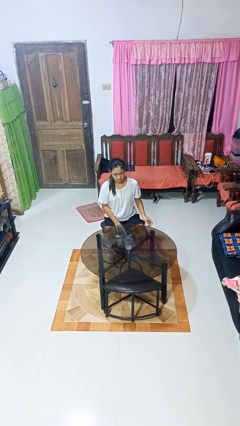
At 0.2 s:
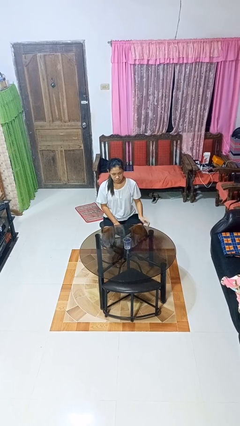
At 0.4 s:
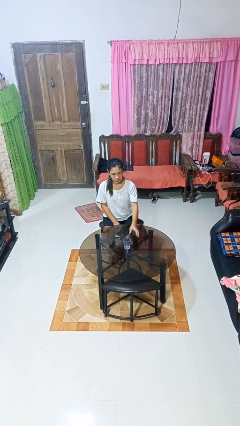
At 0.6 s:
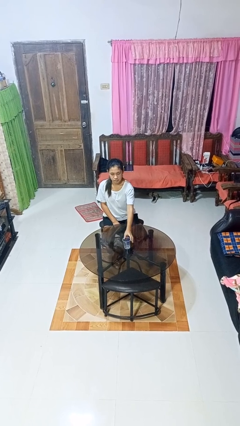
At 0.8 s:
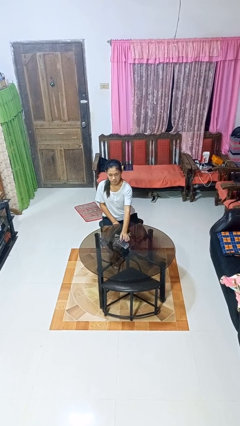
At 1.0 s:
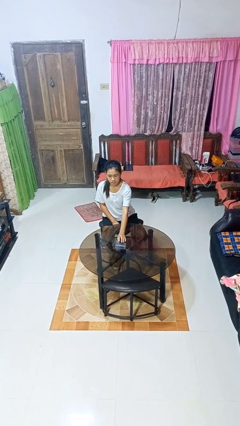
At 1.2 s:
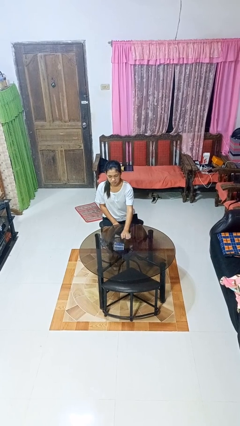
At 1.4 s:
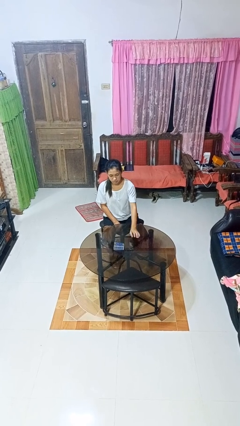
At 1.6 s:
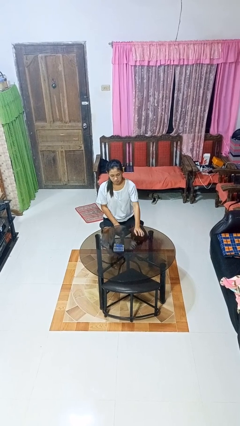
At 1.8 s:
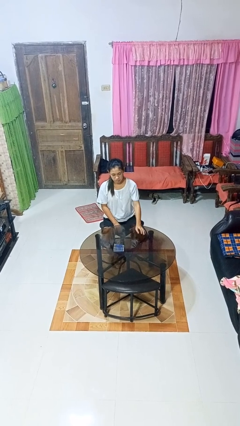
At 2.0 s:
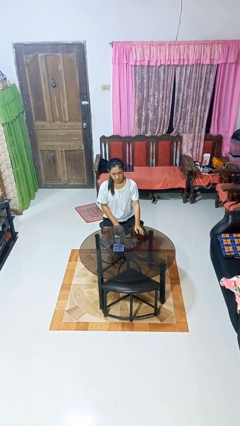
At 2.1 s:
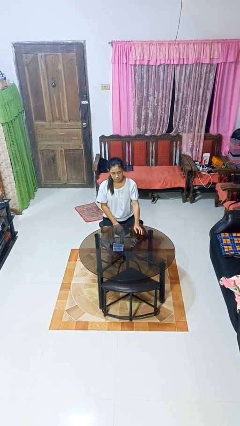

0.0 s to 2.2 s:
person knocks over glass

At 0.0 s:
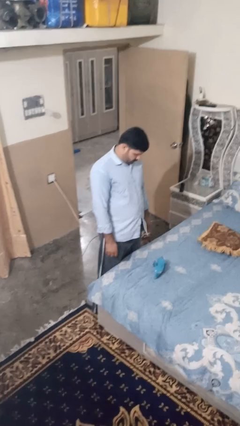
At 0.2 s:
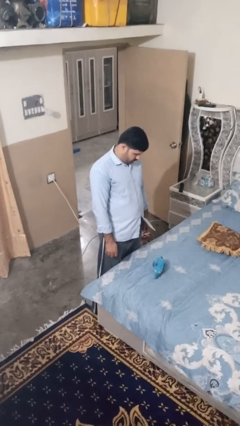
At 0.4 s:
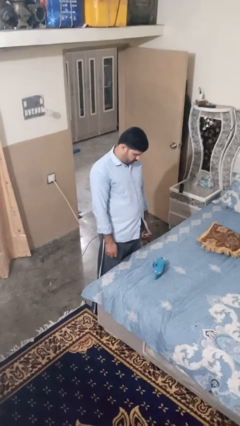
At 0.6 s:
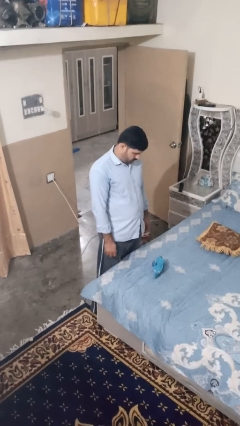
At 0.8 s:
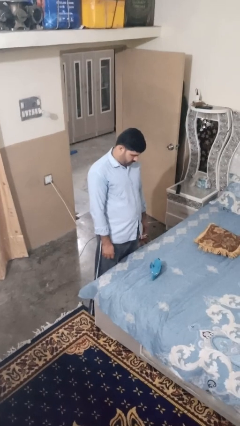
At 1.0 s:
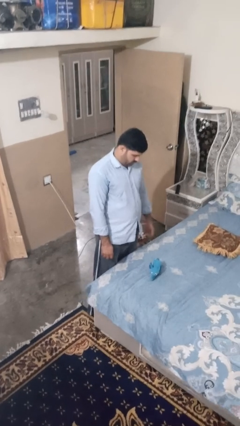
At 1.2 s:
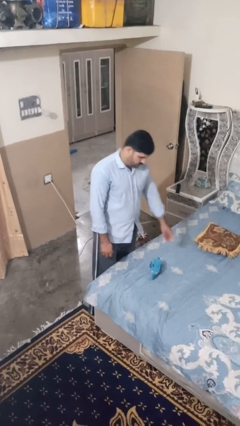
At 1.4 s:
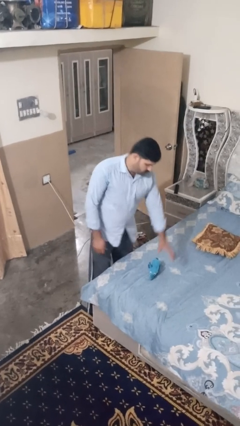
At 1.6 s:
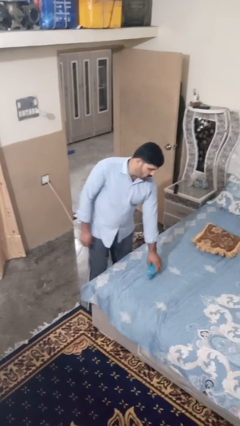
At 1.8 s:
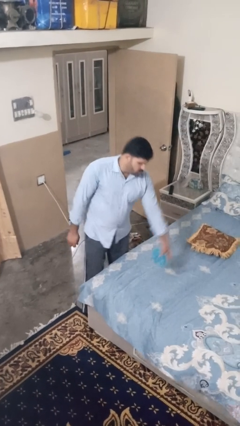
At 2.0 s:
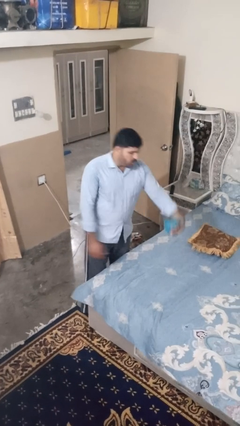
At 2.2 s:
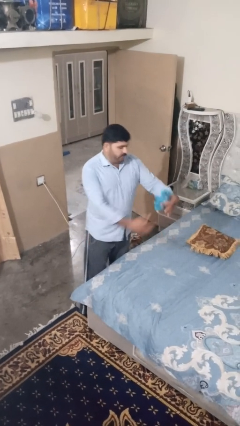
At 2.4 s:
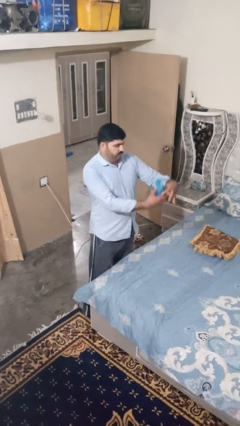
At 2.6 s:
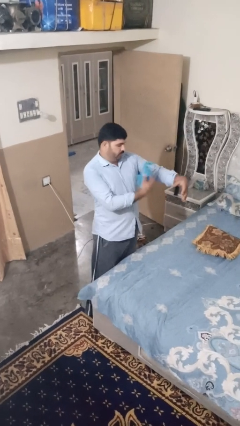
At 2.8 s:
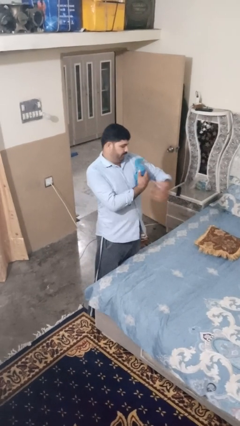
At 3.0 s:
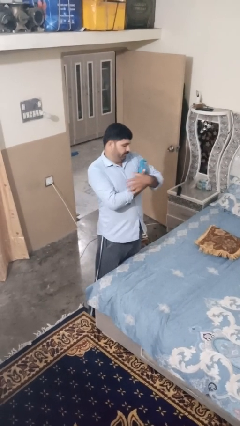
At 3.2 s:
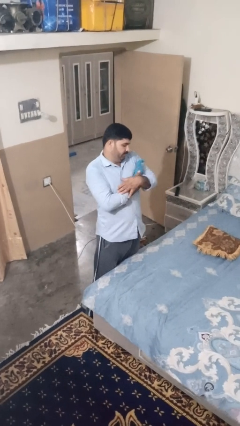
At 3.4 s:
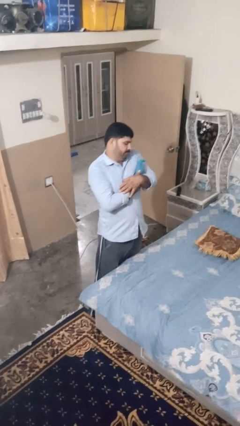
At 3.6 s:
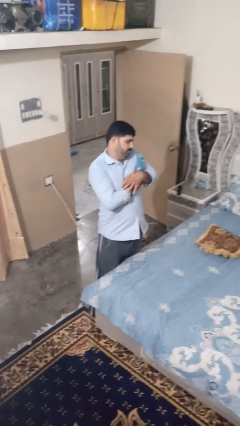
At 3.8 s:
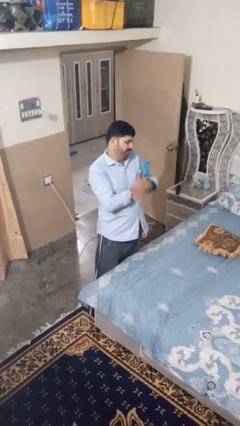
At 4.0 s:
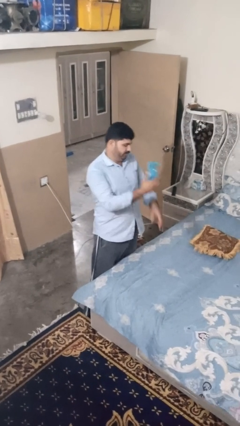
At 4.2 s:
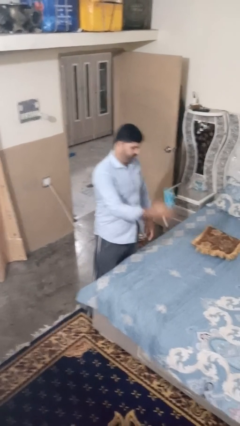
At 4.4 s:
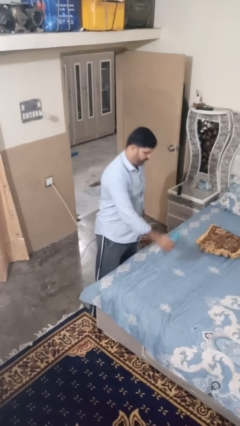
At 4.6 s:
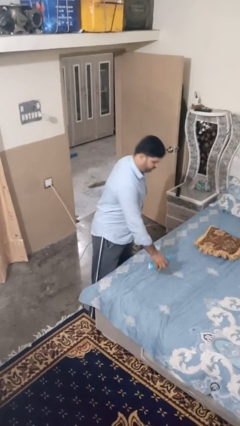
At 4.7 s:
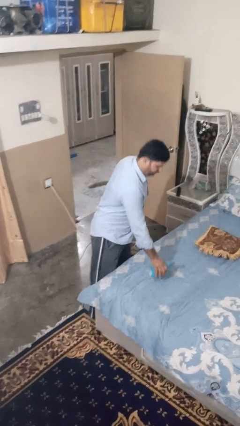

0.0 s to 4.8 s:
person hugs stuffed animal

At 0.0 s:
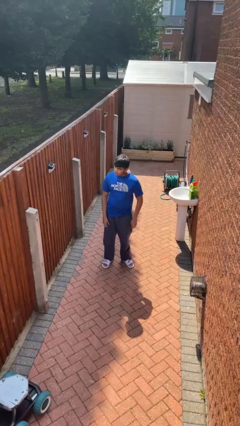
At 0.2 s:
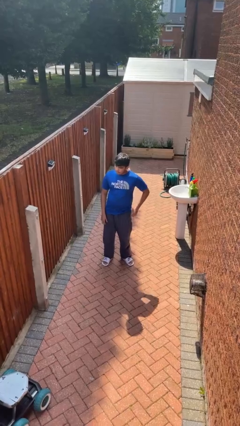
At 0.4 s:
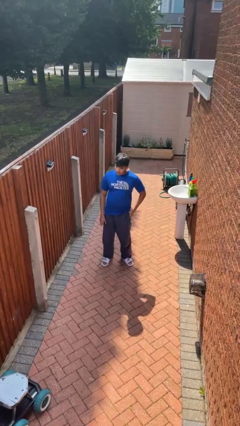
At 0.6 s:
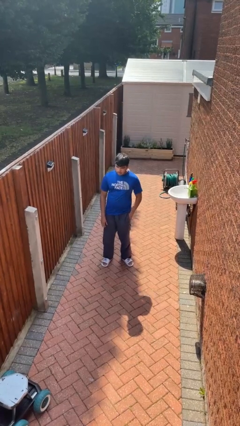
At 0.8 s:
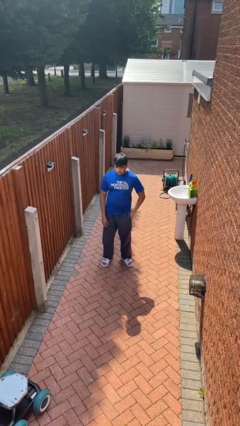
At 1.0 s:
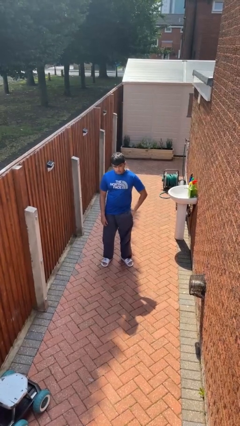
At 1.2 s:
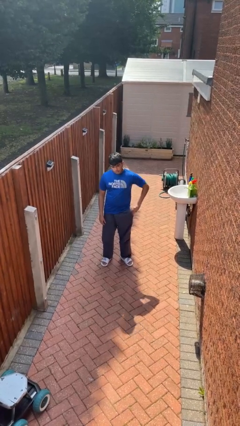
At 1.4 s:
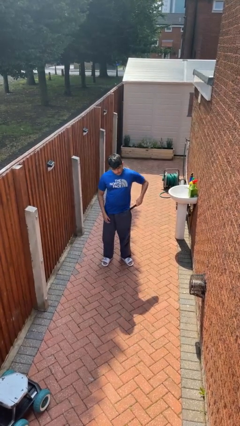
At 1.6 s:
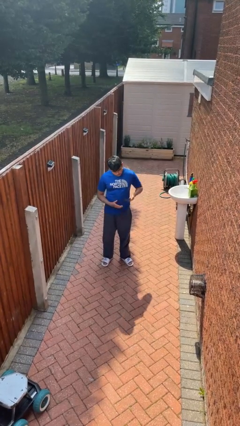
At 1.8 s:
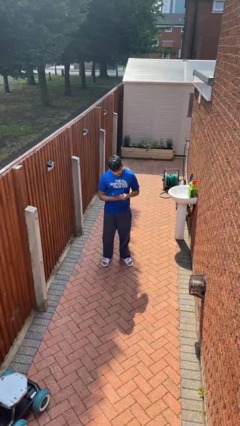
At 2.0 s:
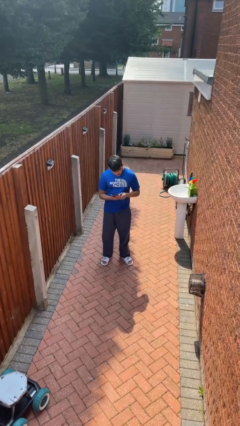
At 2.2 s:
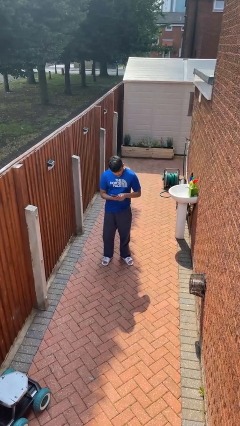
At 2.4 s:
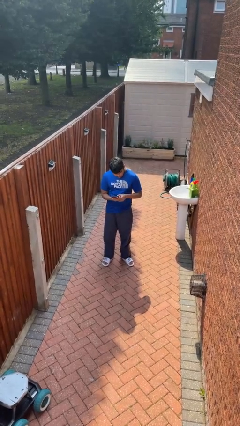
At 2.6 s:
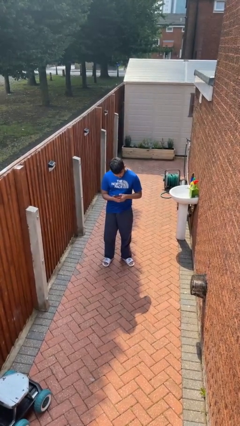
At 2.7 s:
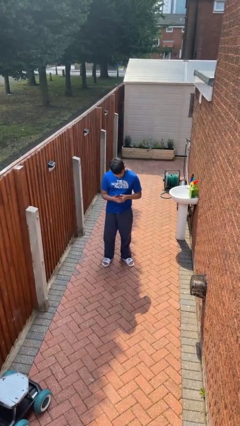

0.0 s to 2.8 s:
person takes phone from pocket

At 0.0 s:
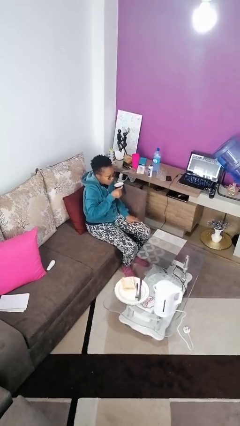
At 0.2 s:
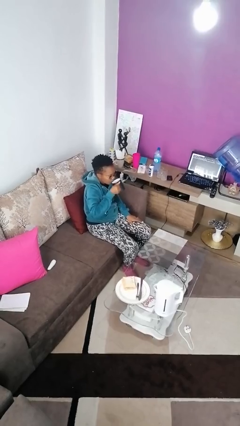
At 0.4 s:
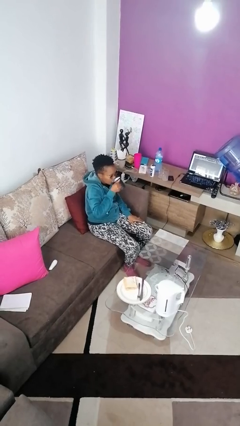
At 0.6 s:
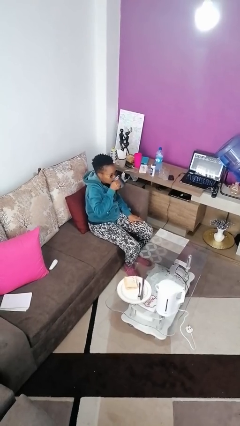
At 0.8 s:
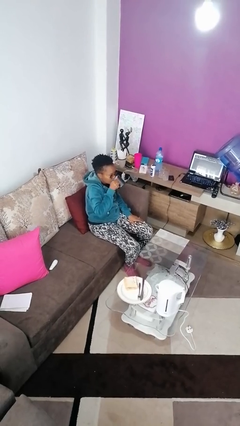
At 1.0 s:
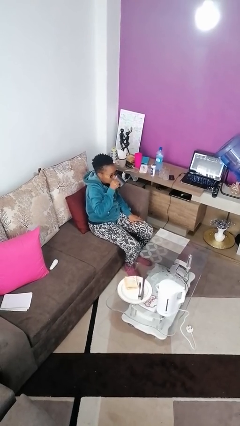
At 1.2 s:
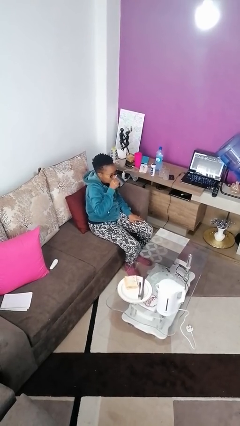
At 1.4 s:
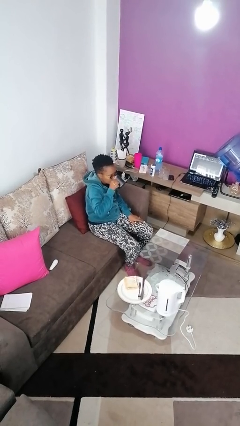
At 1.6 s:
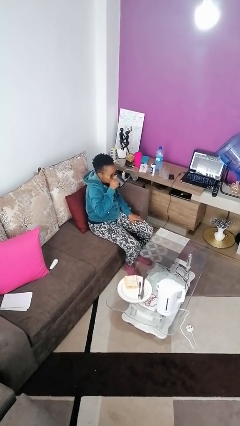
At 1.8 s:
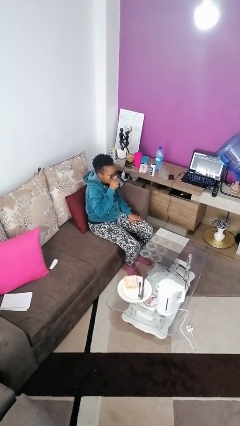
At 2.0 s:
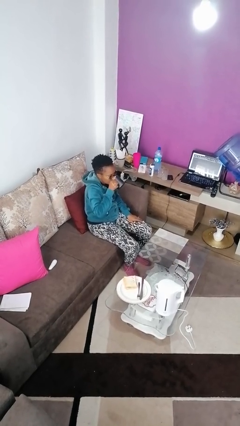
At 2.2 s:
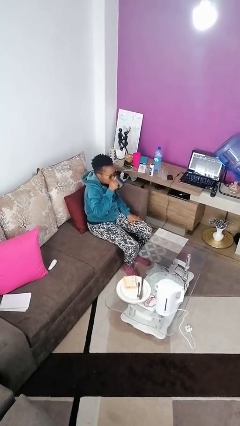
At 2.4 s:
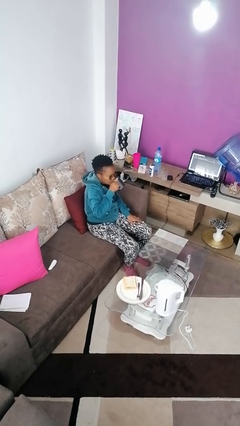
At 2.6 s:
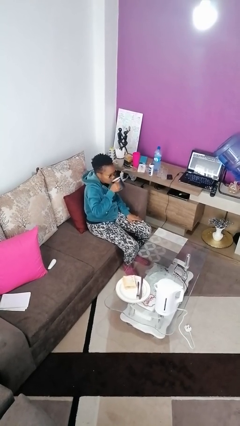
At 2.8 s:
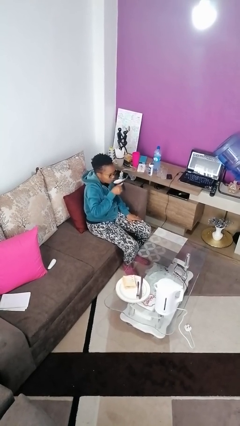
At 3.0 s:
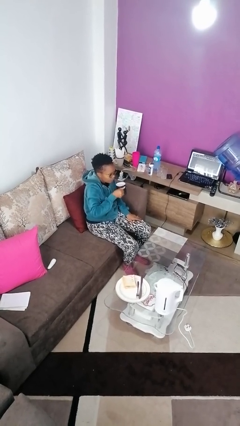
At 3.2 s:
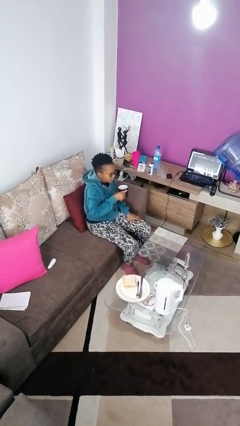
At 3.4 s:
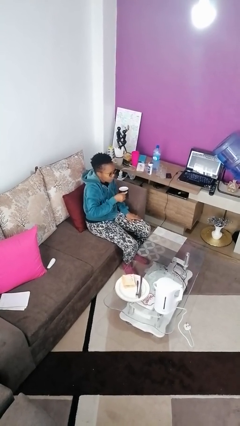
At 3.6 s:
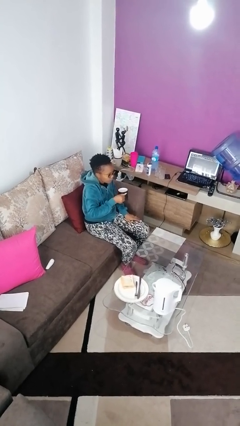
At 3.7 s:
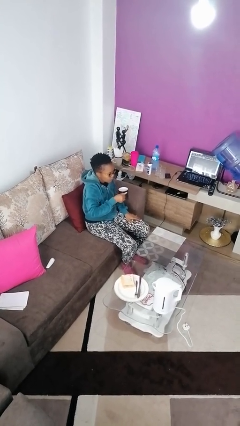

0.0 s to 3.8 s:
person drinks from mug

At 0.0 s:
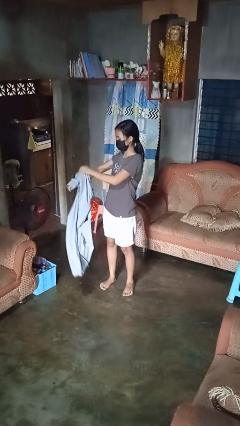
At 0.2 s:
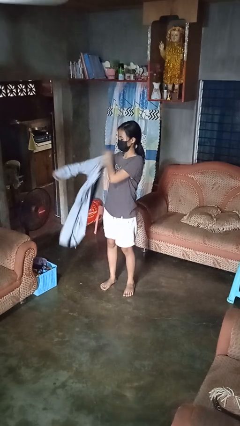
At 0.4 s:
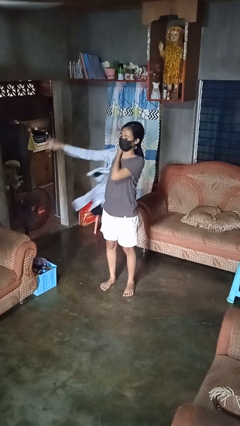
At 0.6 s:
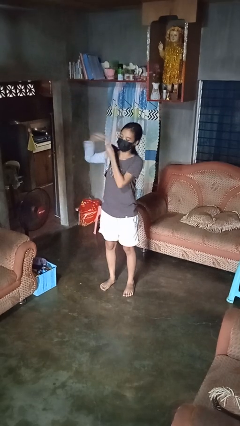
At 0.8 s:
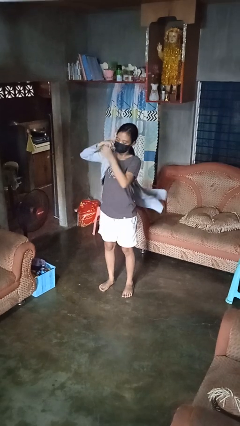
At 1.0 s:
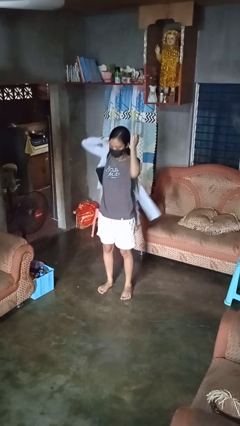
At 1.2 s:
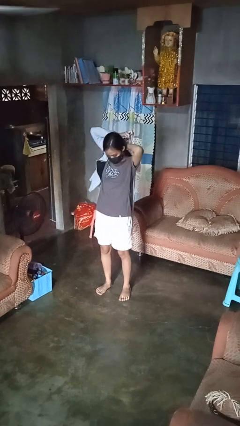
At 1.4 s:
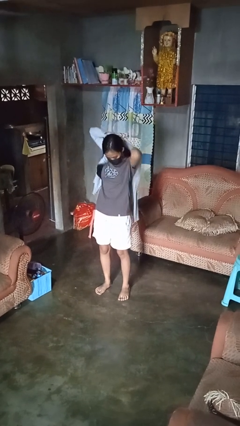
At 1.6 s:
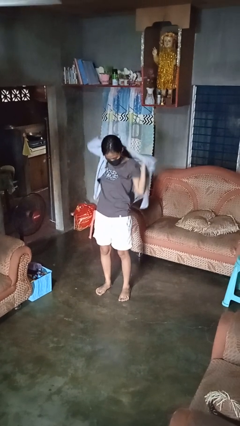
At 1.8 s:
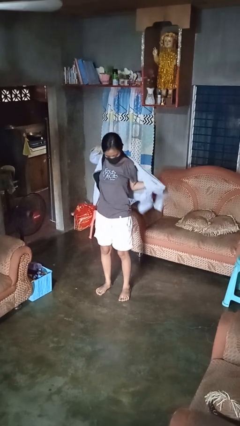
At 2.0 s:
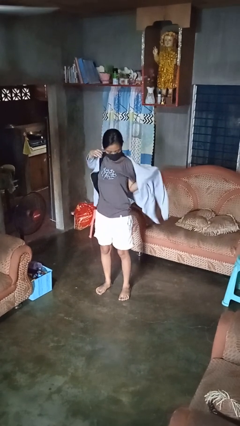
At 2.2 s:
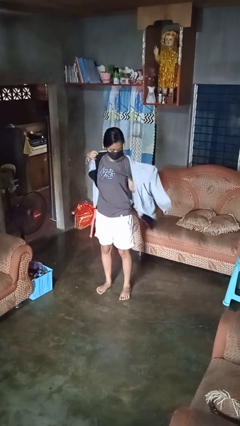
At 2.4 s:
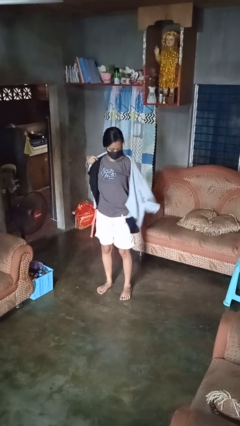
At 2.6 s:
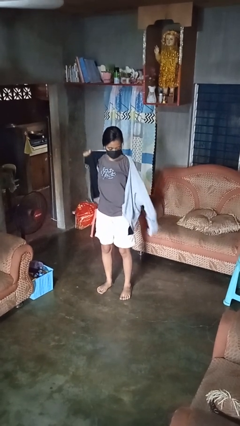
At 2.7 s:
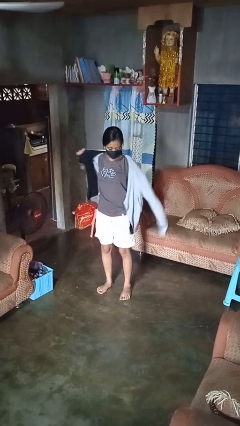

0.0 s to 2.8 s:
person puts on jacket

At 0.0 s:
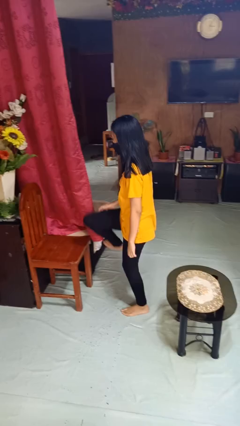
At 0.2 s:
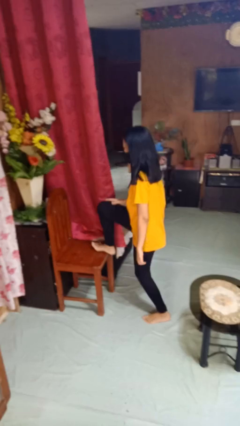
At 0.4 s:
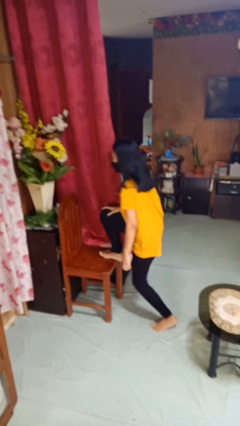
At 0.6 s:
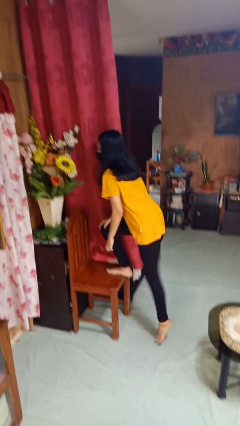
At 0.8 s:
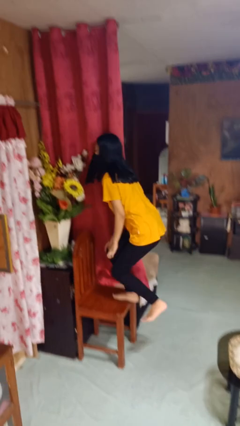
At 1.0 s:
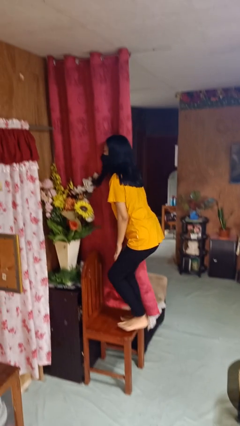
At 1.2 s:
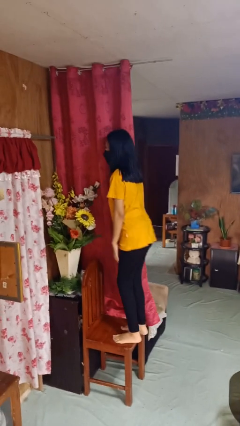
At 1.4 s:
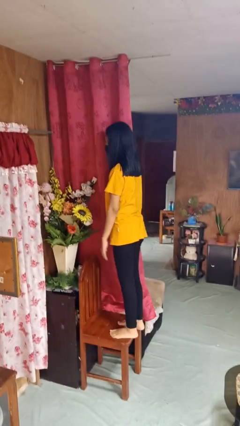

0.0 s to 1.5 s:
person climbs on chair
